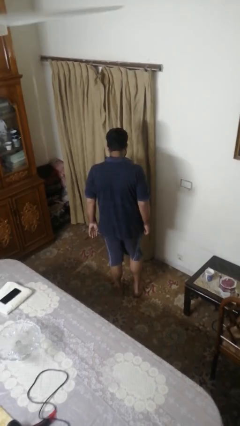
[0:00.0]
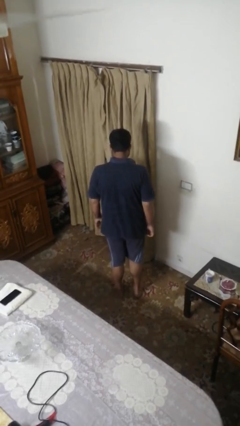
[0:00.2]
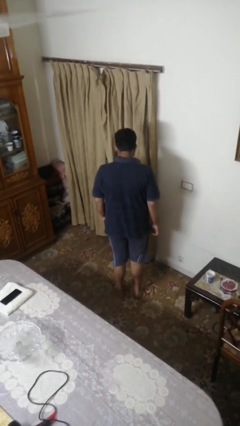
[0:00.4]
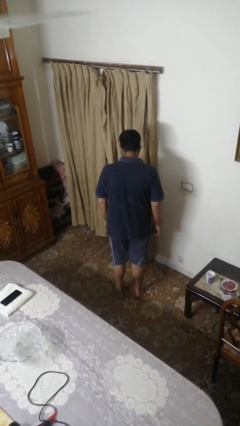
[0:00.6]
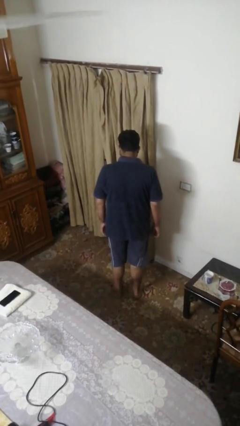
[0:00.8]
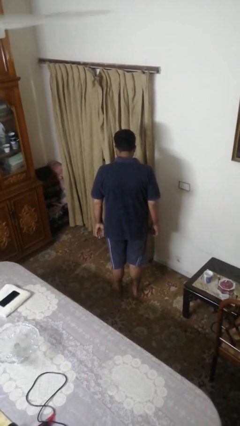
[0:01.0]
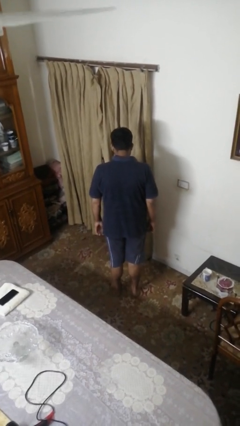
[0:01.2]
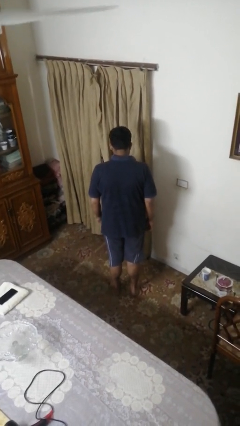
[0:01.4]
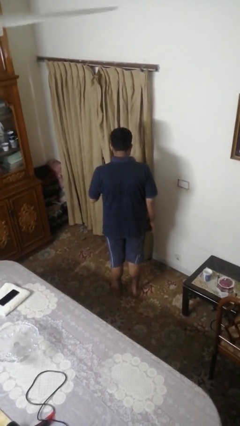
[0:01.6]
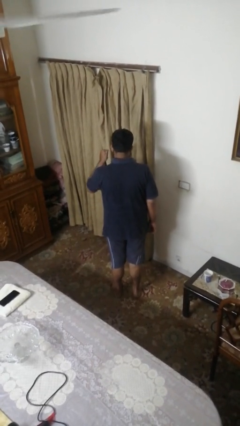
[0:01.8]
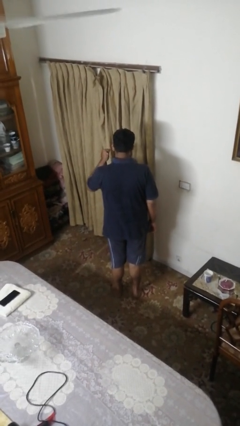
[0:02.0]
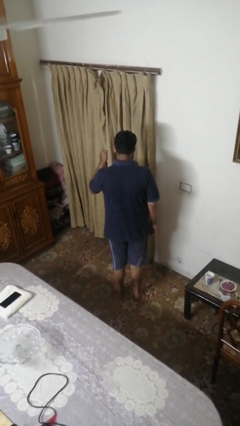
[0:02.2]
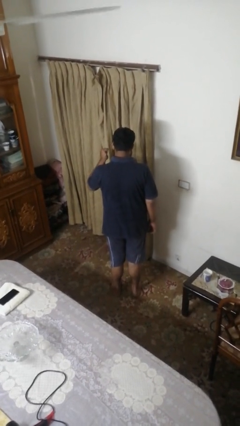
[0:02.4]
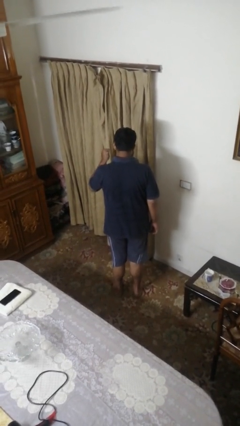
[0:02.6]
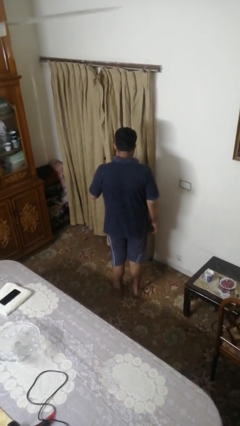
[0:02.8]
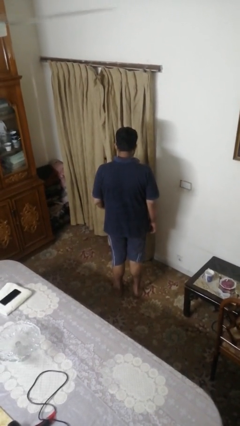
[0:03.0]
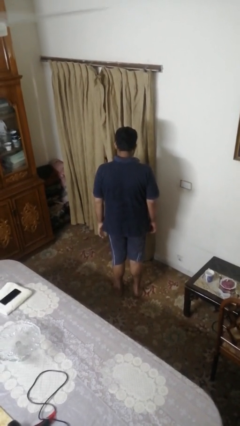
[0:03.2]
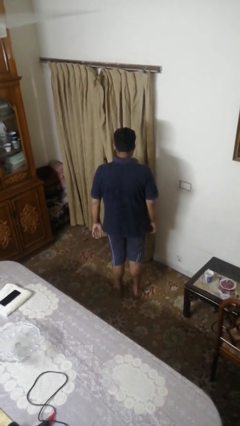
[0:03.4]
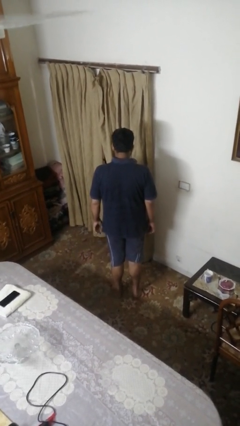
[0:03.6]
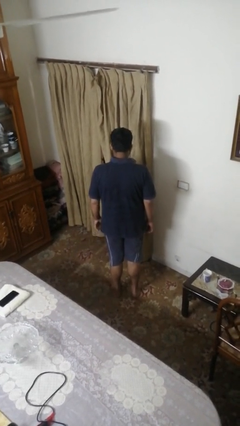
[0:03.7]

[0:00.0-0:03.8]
person gestures behind me

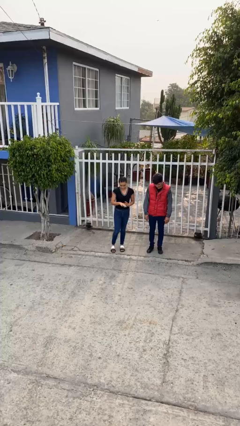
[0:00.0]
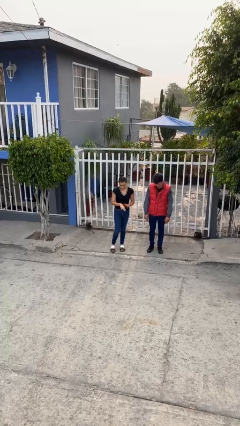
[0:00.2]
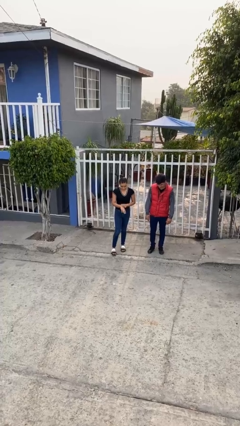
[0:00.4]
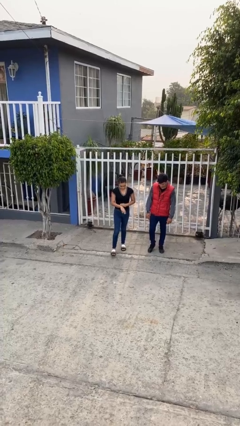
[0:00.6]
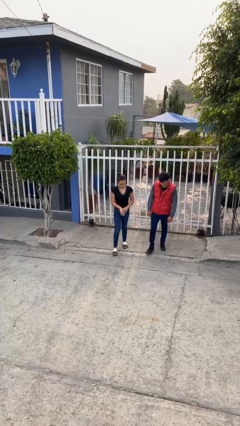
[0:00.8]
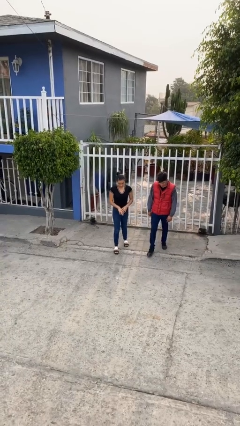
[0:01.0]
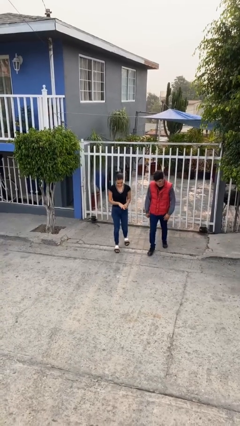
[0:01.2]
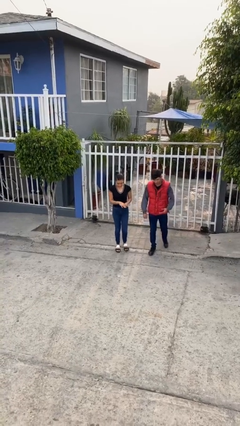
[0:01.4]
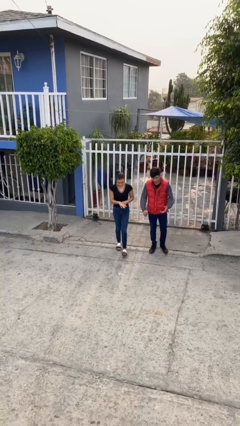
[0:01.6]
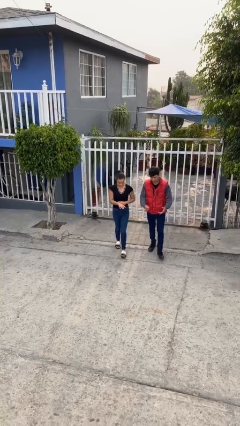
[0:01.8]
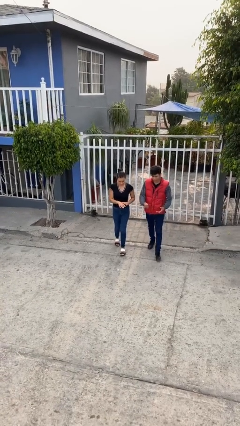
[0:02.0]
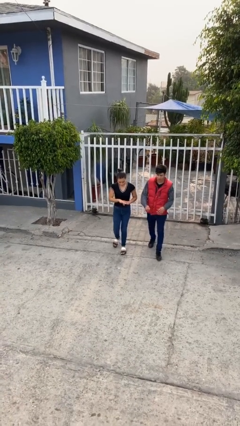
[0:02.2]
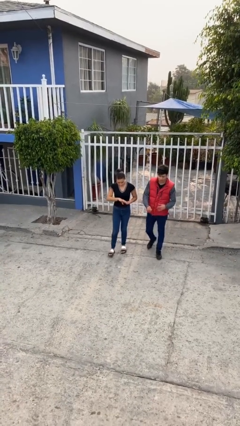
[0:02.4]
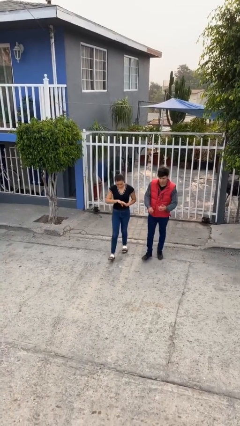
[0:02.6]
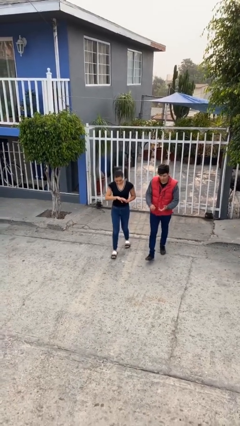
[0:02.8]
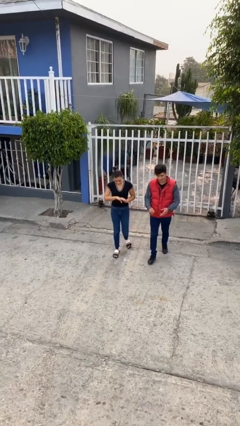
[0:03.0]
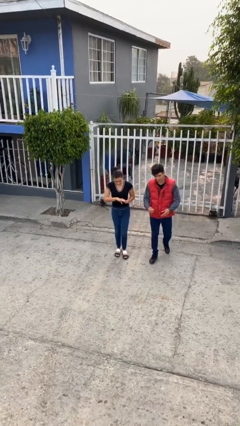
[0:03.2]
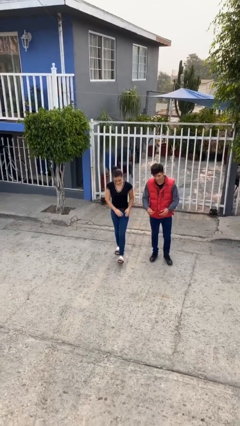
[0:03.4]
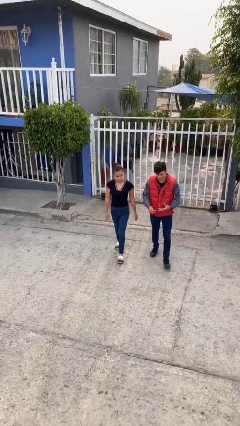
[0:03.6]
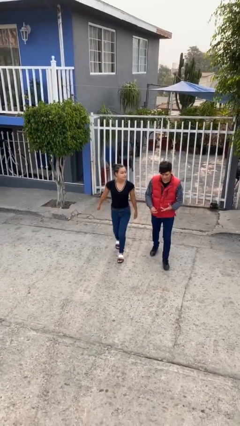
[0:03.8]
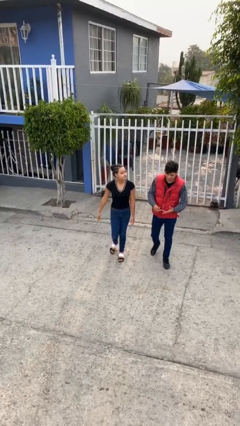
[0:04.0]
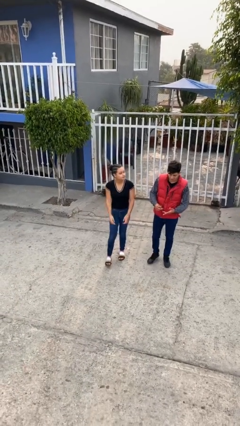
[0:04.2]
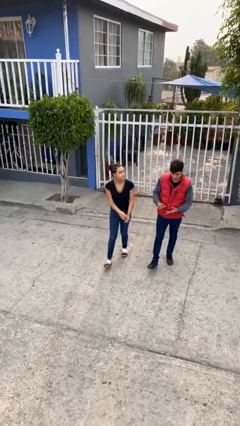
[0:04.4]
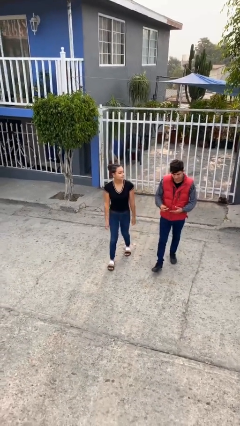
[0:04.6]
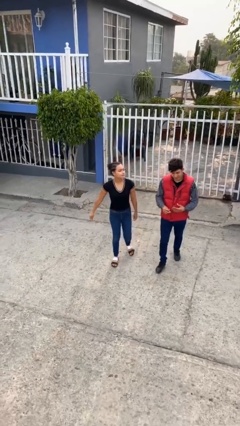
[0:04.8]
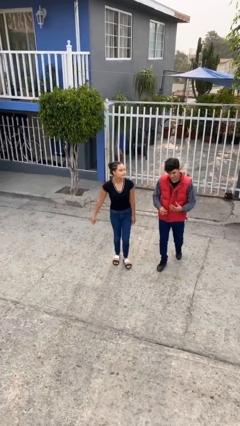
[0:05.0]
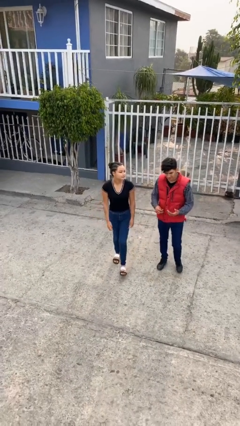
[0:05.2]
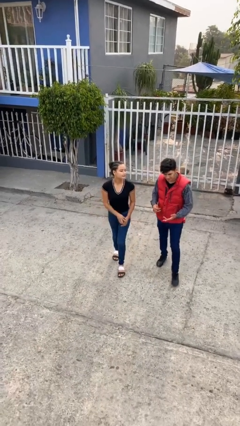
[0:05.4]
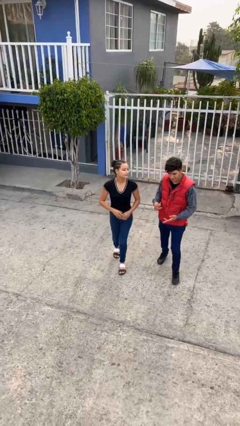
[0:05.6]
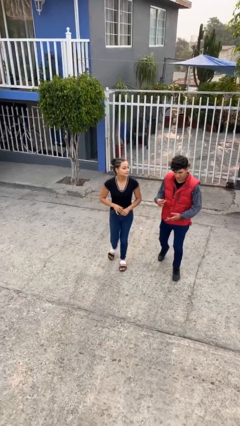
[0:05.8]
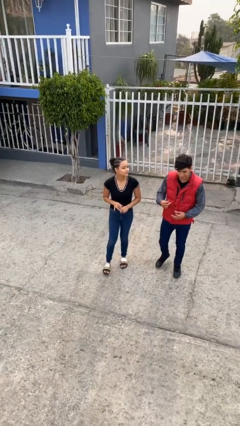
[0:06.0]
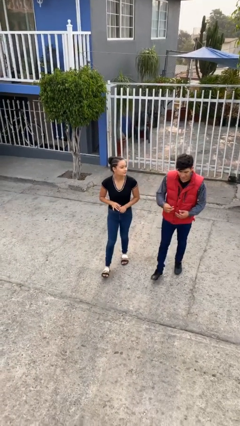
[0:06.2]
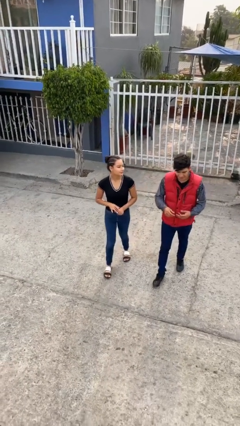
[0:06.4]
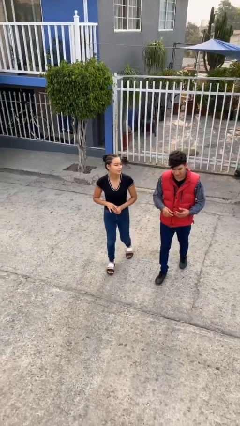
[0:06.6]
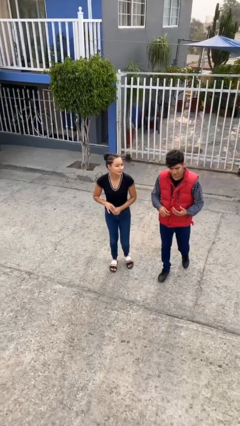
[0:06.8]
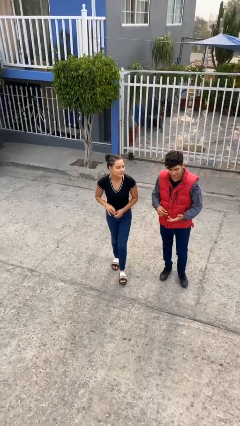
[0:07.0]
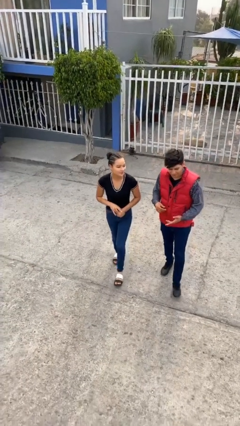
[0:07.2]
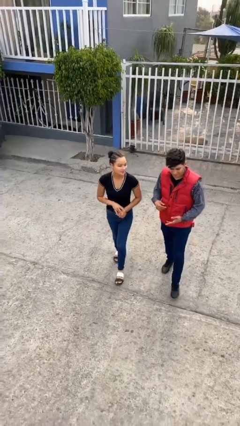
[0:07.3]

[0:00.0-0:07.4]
person talks to person

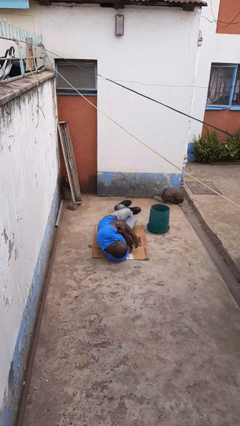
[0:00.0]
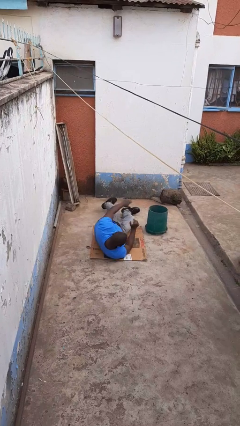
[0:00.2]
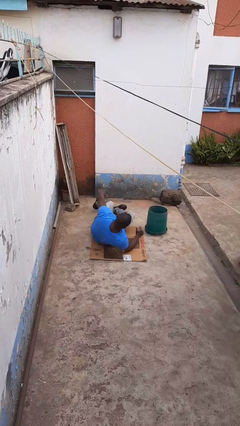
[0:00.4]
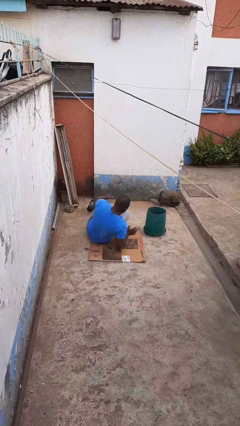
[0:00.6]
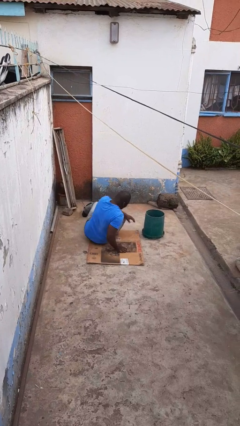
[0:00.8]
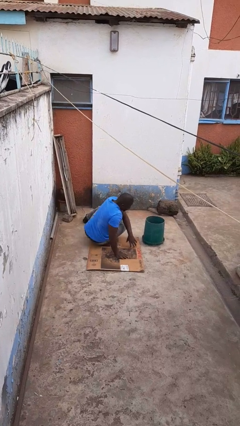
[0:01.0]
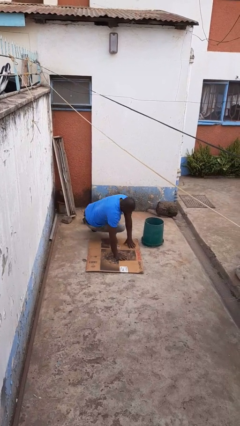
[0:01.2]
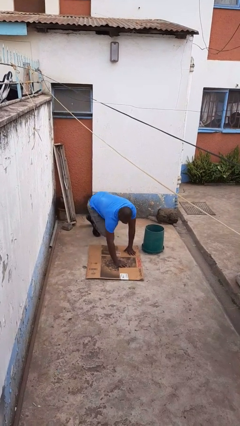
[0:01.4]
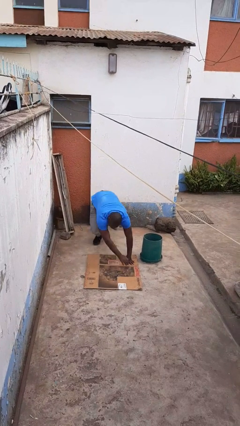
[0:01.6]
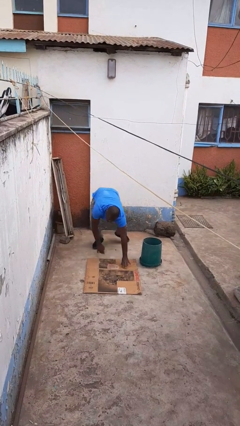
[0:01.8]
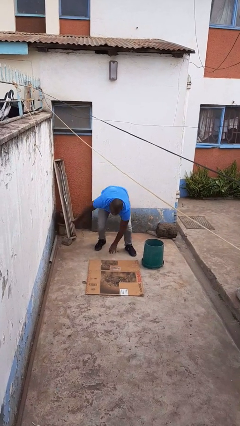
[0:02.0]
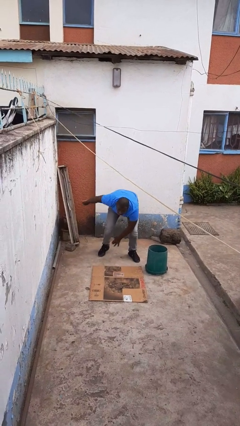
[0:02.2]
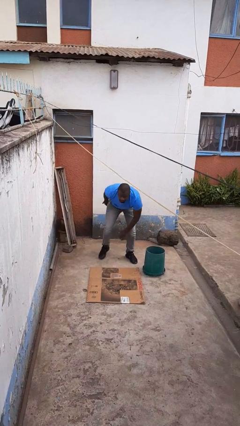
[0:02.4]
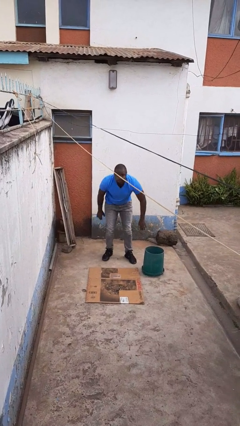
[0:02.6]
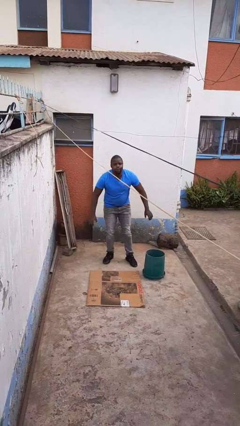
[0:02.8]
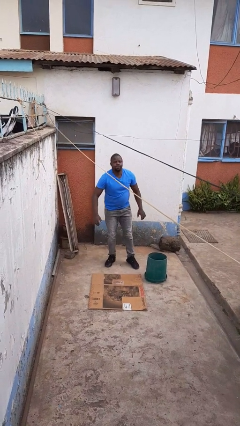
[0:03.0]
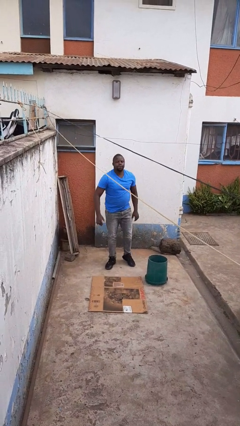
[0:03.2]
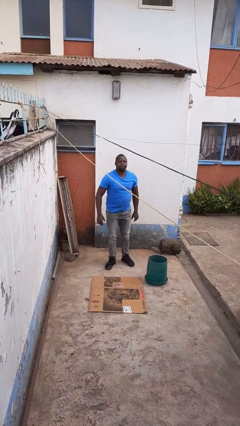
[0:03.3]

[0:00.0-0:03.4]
person stands up from floor

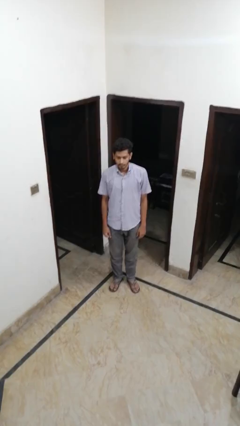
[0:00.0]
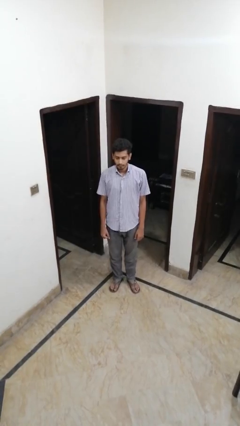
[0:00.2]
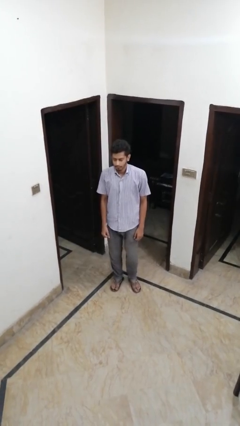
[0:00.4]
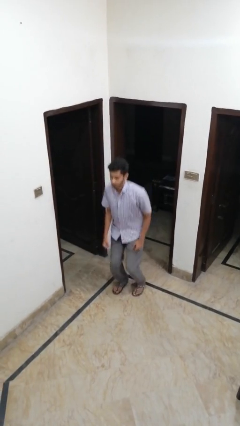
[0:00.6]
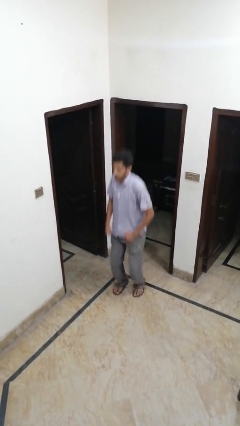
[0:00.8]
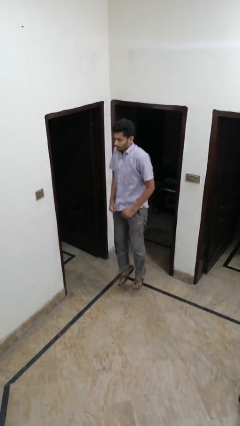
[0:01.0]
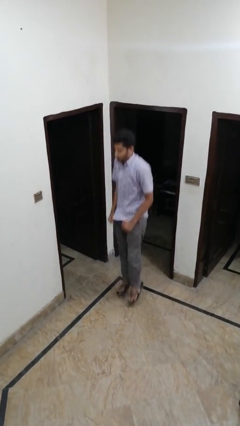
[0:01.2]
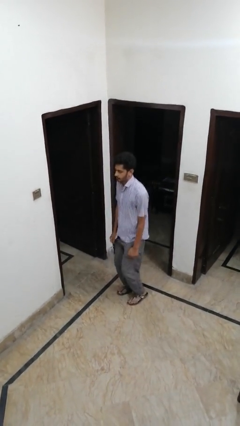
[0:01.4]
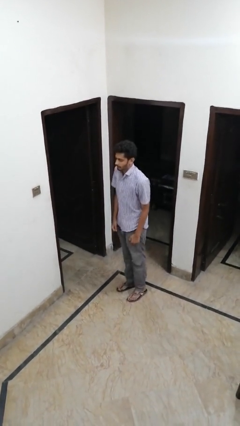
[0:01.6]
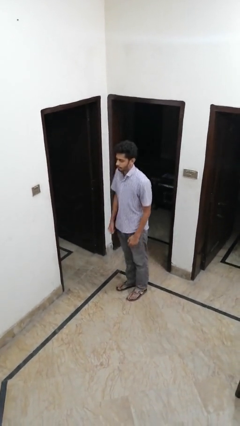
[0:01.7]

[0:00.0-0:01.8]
person jumps

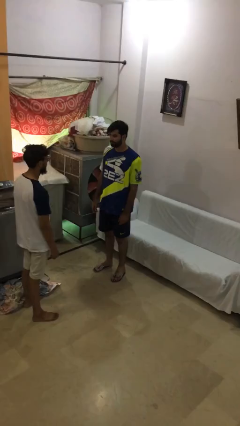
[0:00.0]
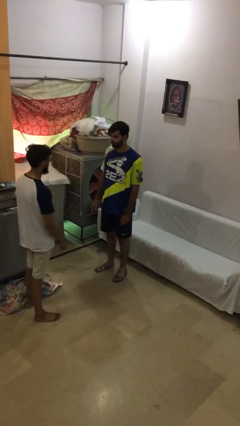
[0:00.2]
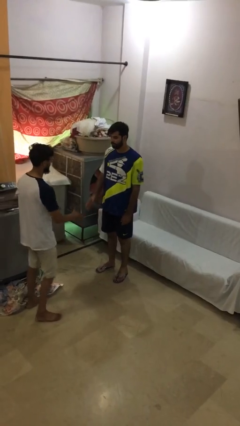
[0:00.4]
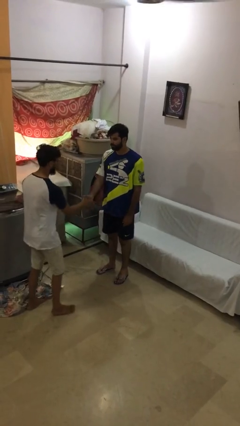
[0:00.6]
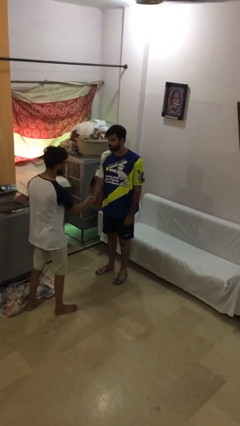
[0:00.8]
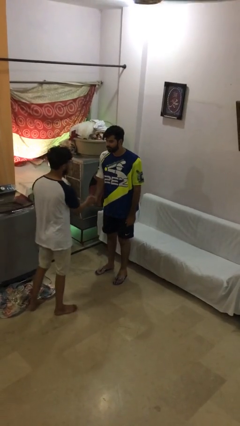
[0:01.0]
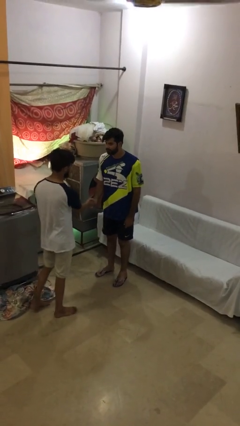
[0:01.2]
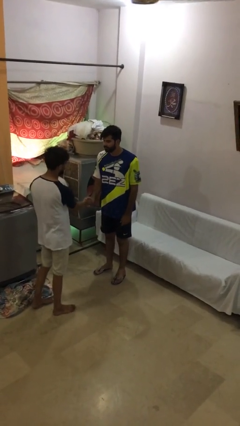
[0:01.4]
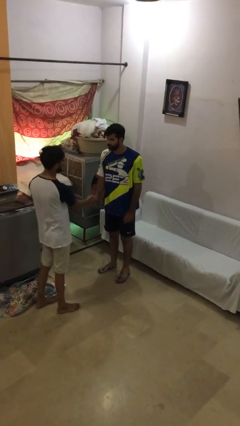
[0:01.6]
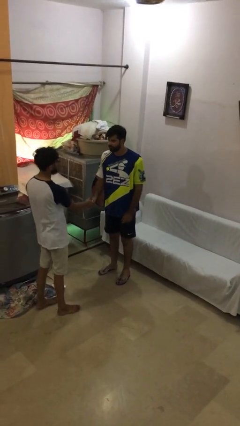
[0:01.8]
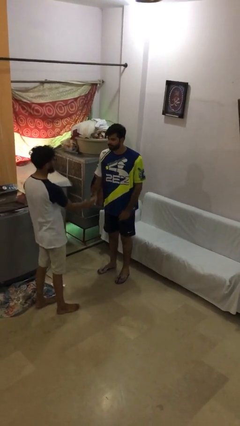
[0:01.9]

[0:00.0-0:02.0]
person shakes hand
